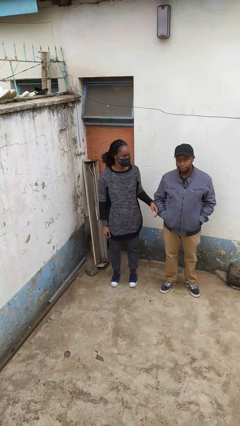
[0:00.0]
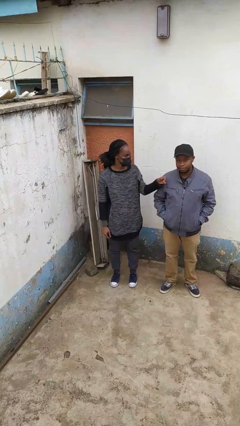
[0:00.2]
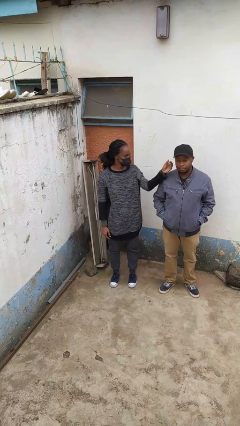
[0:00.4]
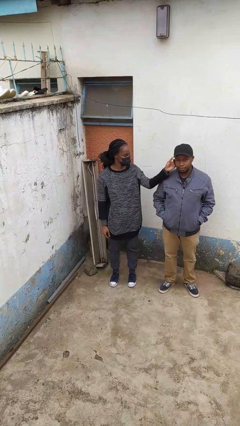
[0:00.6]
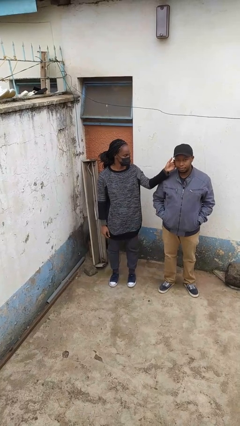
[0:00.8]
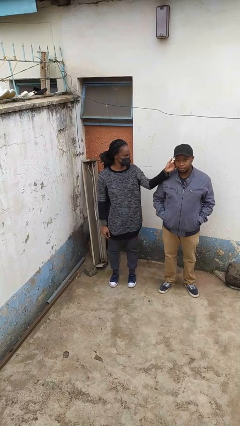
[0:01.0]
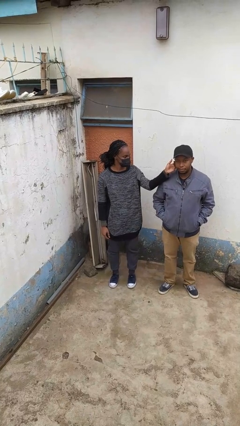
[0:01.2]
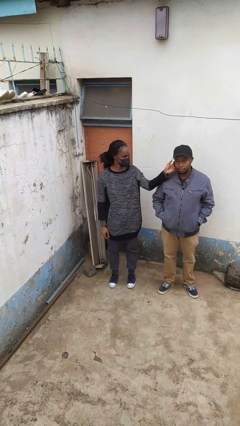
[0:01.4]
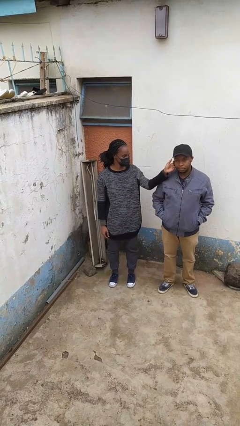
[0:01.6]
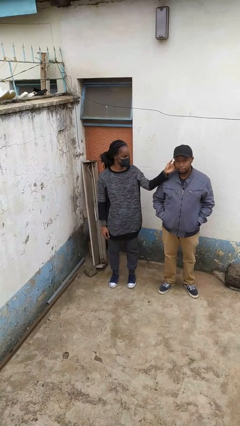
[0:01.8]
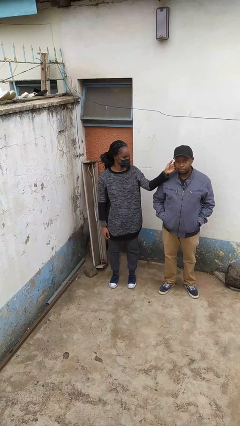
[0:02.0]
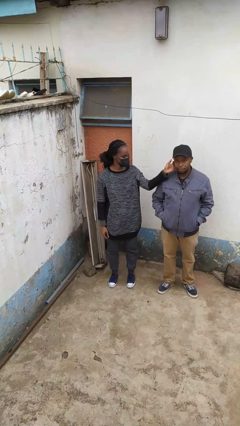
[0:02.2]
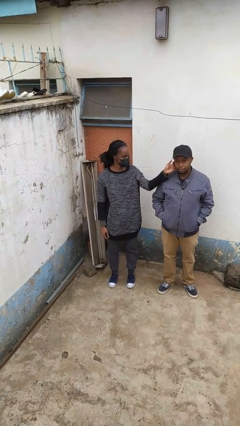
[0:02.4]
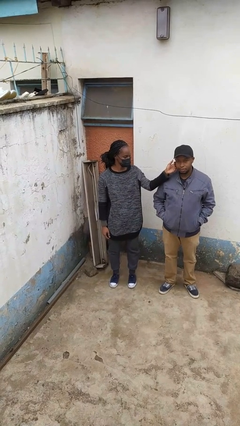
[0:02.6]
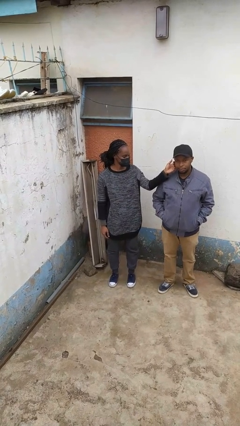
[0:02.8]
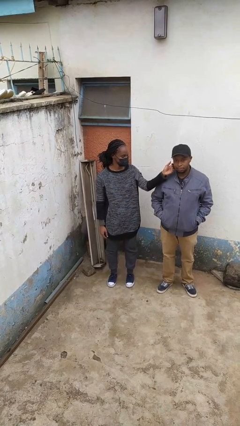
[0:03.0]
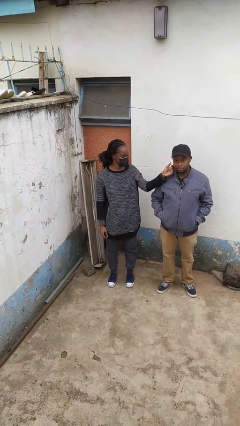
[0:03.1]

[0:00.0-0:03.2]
person touches face of person

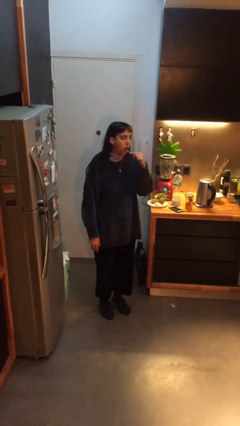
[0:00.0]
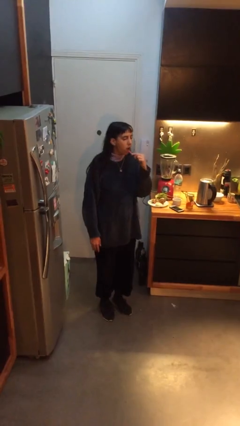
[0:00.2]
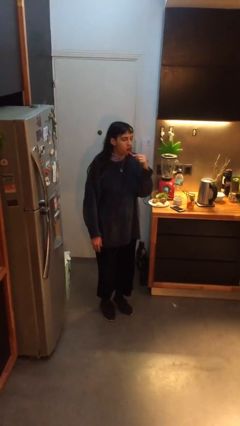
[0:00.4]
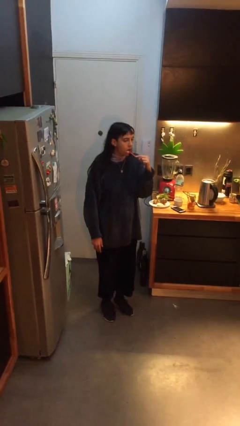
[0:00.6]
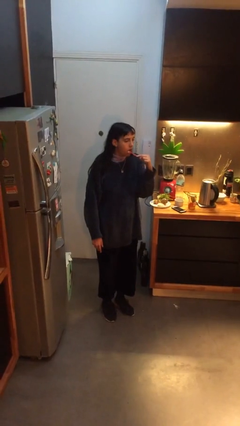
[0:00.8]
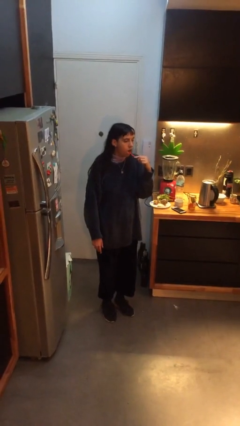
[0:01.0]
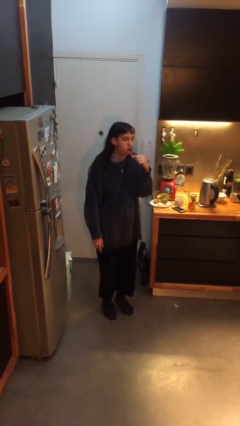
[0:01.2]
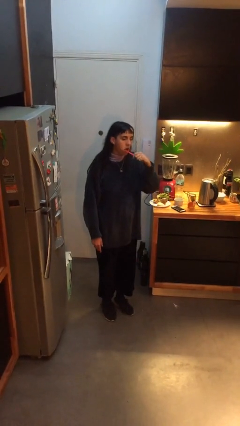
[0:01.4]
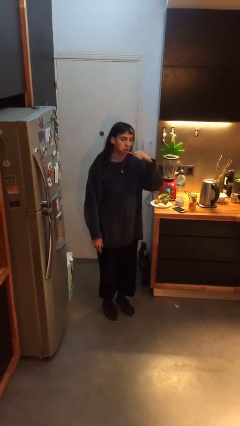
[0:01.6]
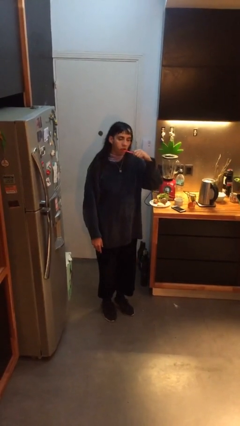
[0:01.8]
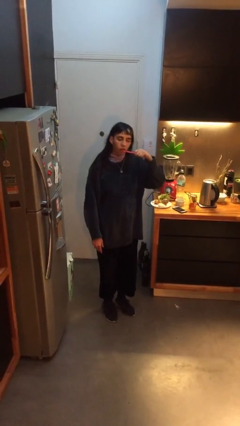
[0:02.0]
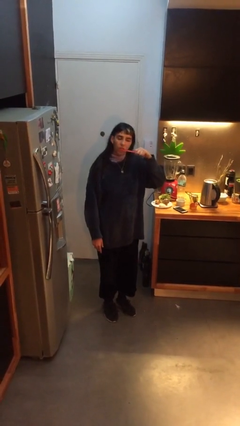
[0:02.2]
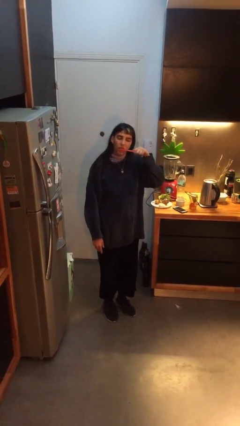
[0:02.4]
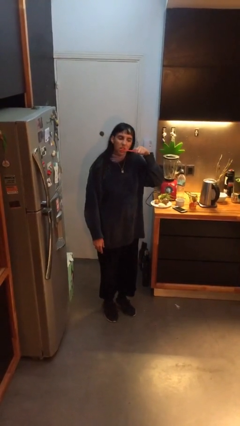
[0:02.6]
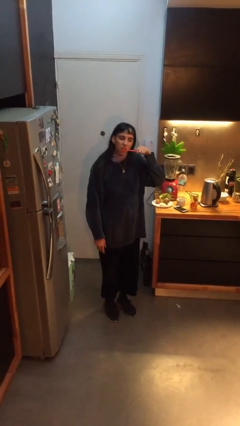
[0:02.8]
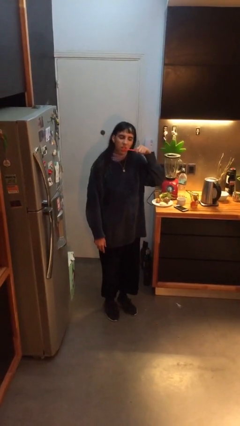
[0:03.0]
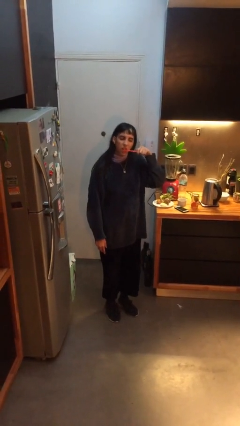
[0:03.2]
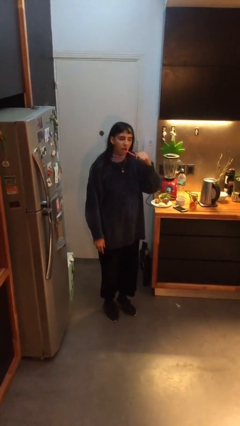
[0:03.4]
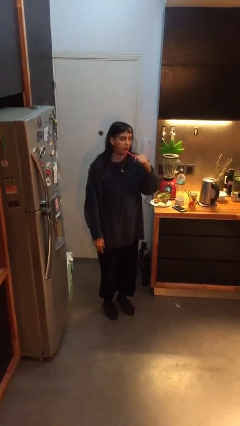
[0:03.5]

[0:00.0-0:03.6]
person brushes teeth

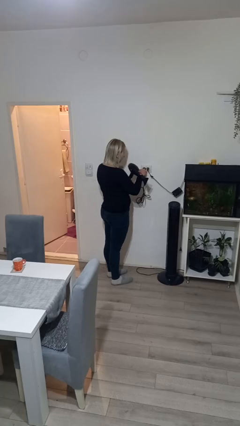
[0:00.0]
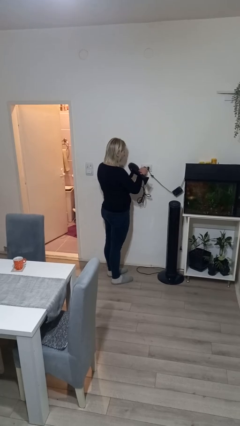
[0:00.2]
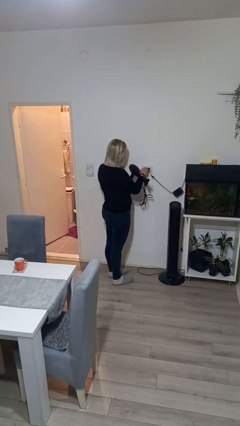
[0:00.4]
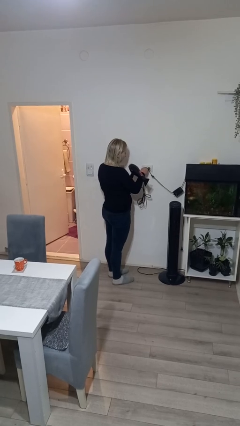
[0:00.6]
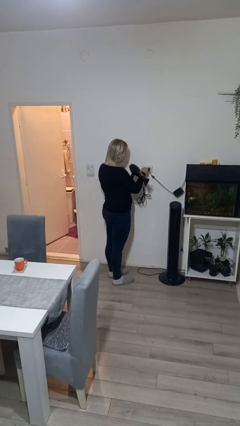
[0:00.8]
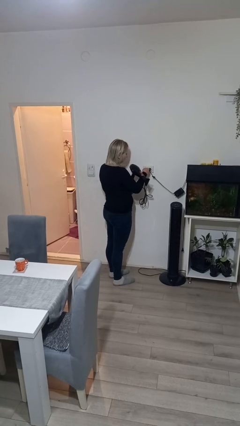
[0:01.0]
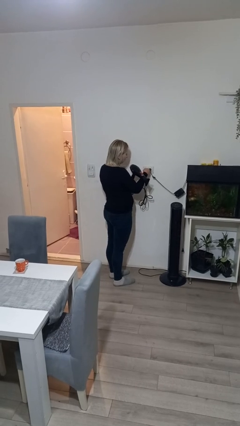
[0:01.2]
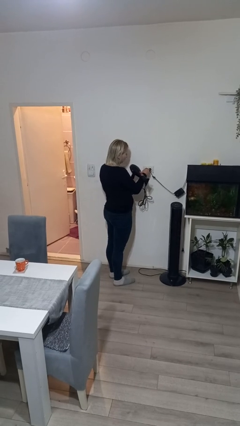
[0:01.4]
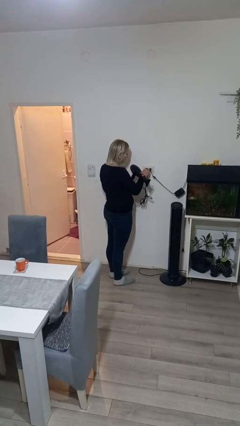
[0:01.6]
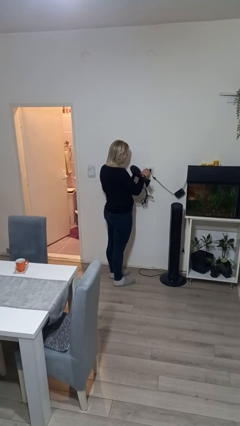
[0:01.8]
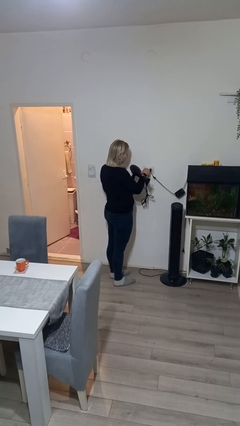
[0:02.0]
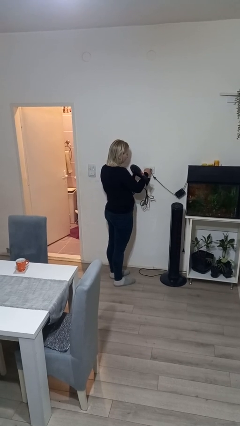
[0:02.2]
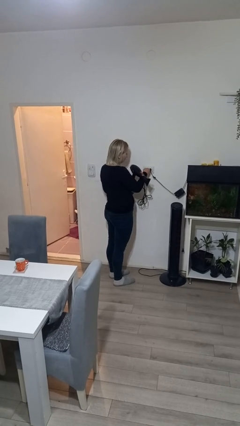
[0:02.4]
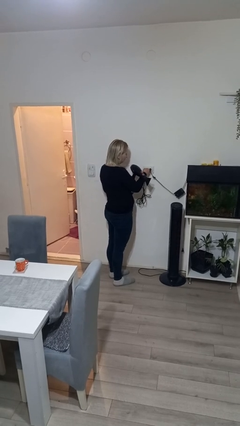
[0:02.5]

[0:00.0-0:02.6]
person plugs into electrical socket

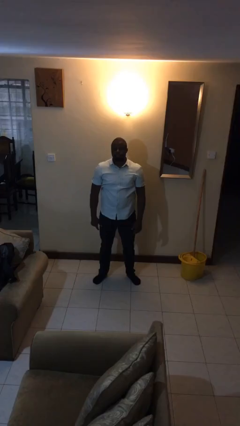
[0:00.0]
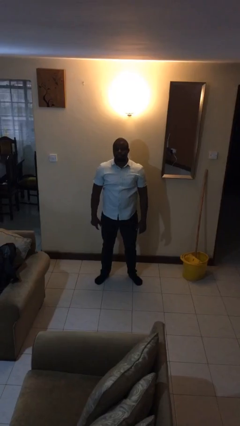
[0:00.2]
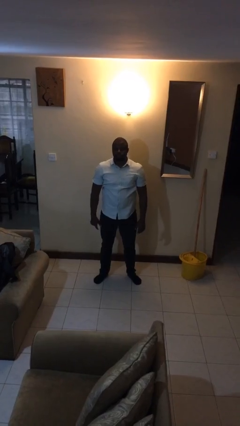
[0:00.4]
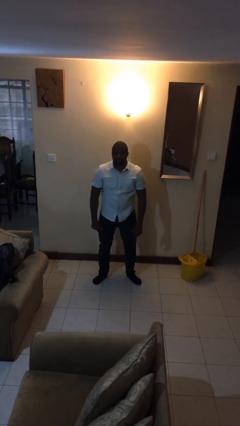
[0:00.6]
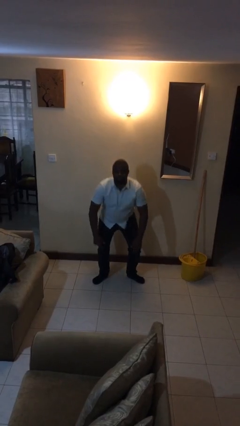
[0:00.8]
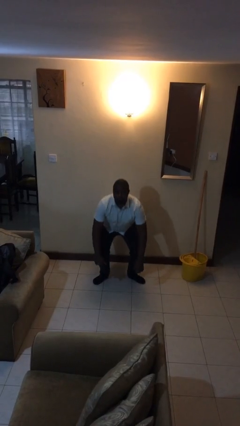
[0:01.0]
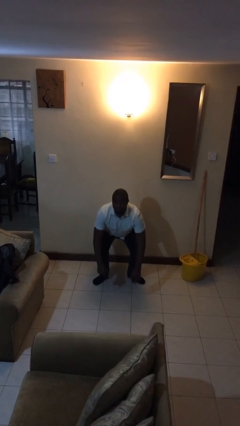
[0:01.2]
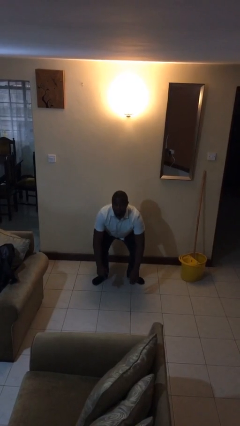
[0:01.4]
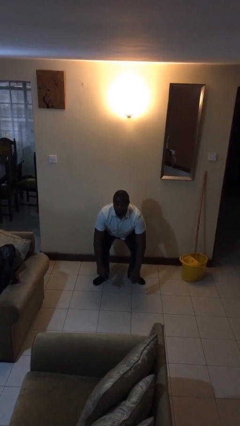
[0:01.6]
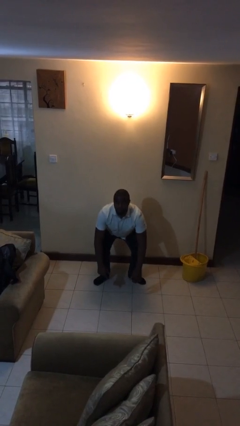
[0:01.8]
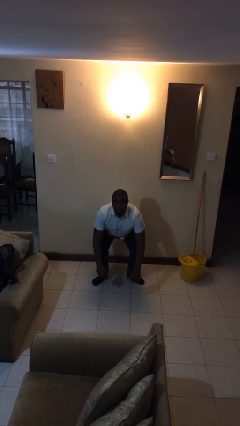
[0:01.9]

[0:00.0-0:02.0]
person squats

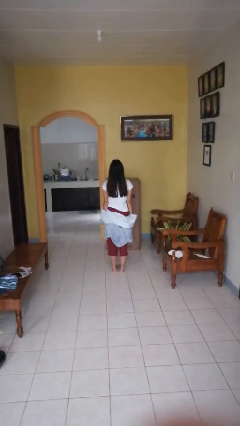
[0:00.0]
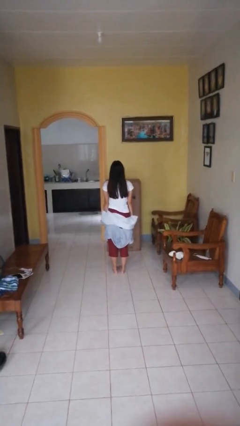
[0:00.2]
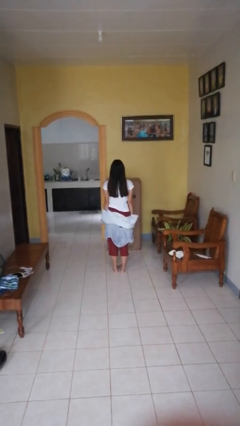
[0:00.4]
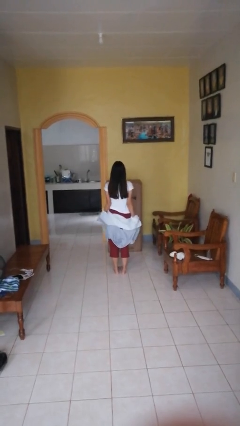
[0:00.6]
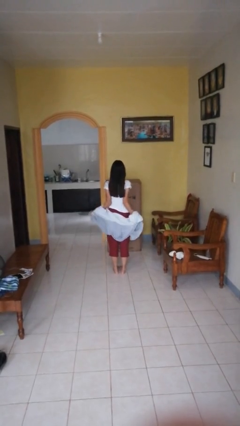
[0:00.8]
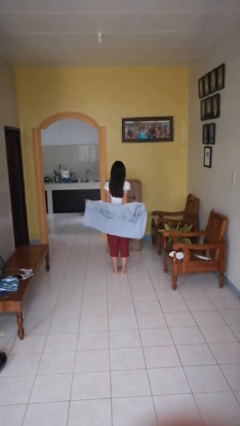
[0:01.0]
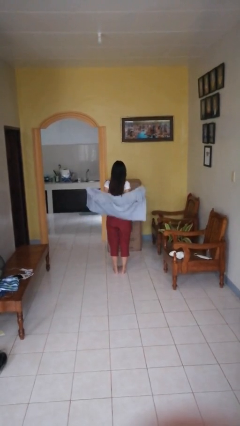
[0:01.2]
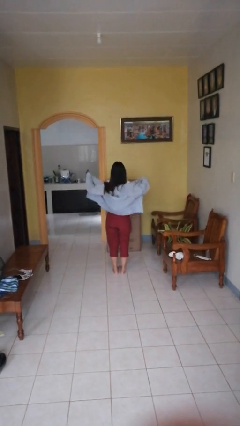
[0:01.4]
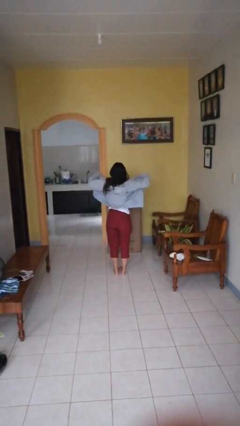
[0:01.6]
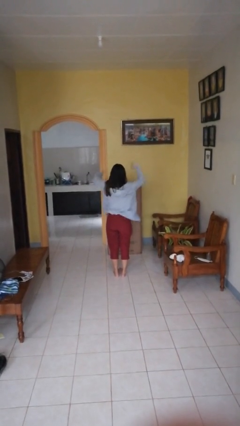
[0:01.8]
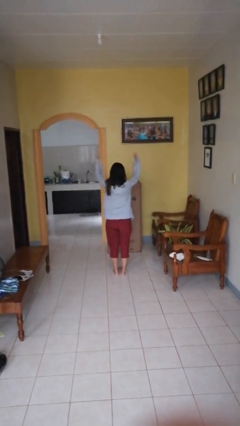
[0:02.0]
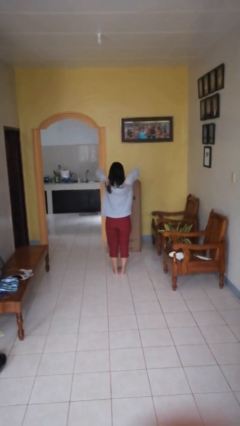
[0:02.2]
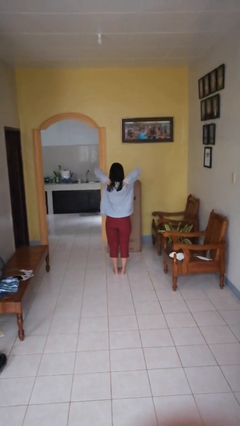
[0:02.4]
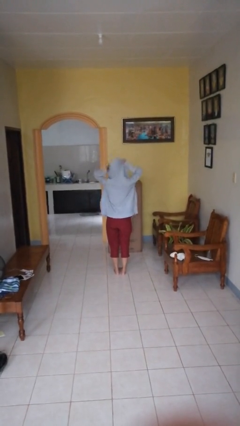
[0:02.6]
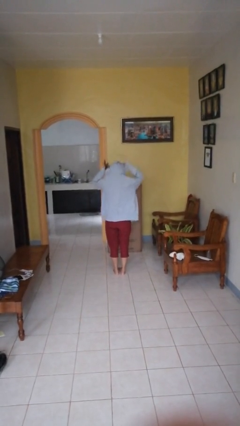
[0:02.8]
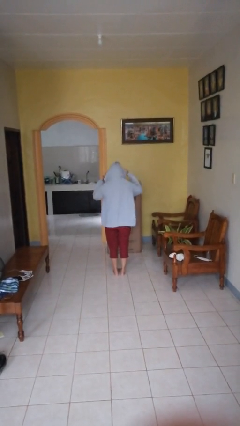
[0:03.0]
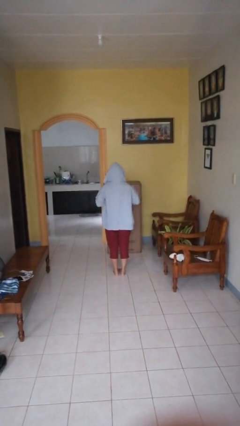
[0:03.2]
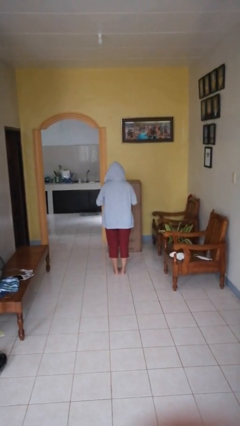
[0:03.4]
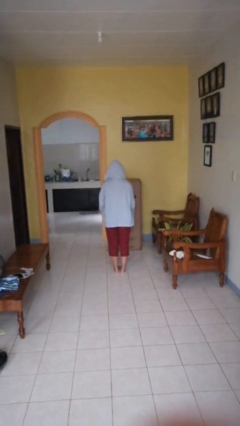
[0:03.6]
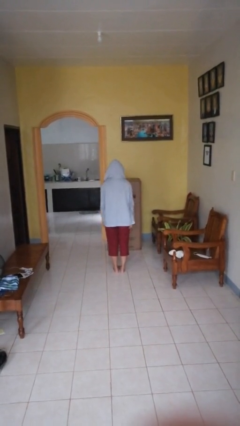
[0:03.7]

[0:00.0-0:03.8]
person puts on hoodie

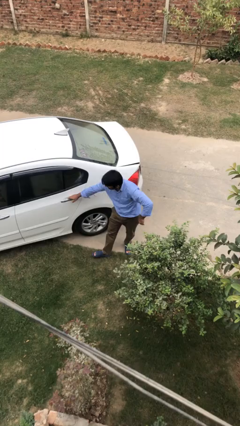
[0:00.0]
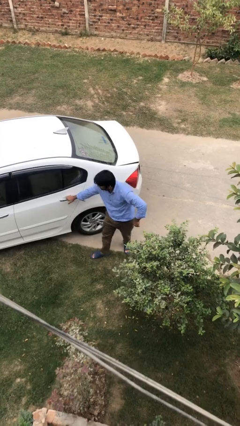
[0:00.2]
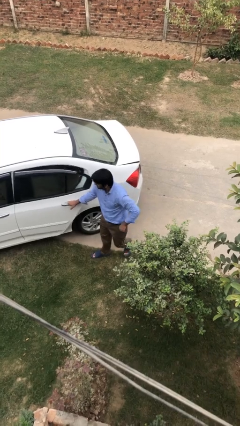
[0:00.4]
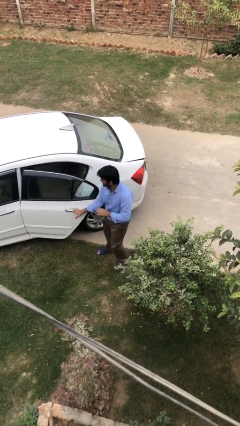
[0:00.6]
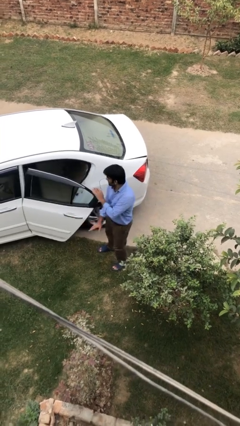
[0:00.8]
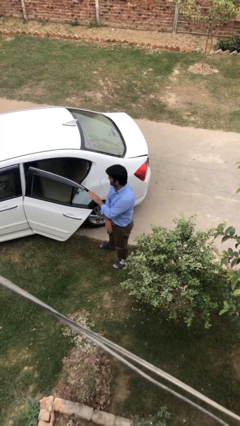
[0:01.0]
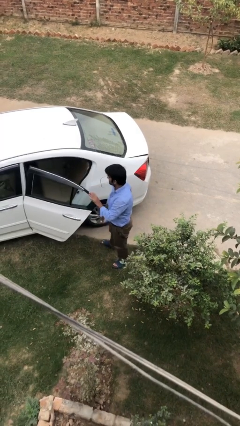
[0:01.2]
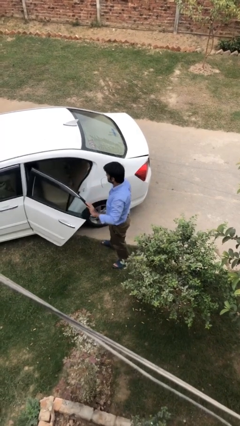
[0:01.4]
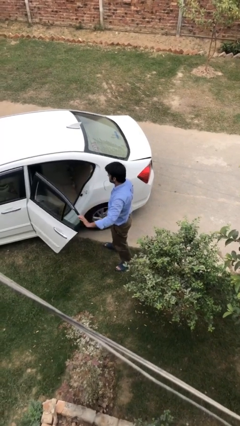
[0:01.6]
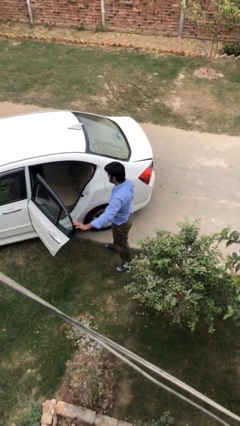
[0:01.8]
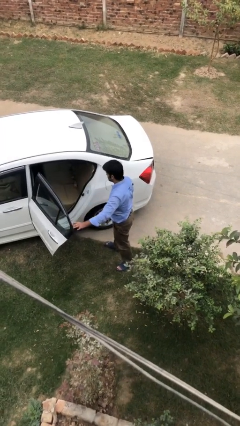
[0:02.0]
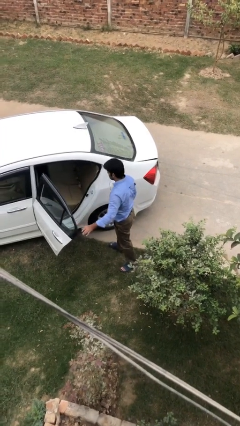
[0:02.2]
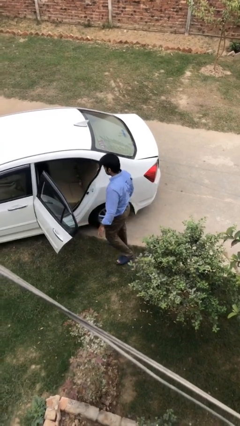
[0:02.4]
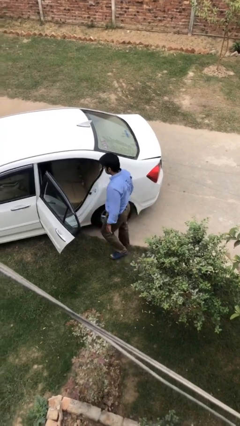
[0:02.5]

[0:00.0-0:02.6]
person opens car door
